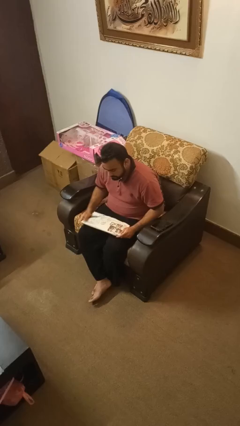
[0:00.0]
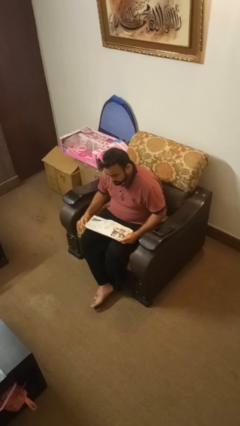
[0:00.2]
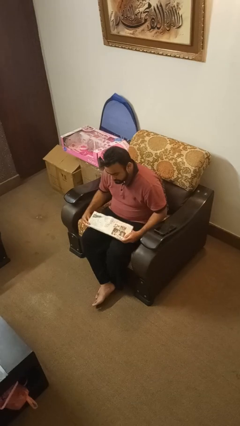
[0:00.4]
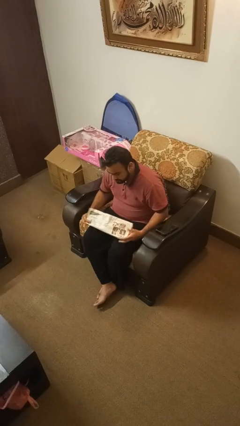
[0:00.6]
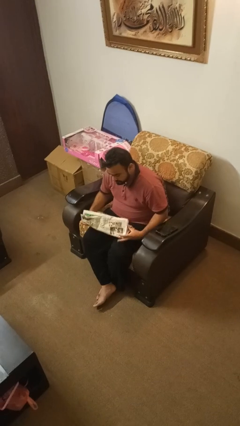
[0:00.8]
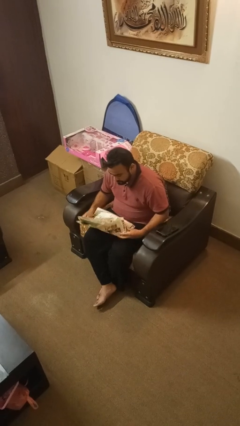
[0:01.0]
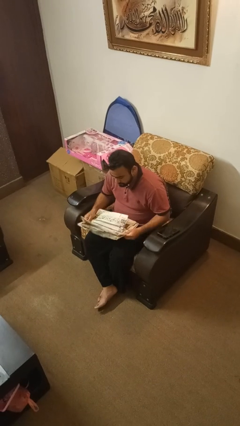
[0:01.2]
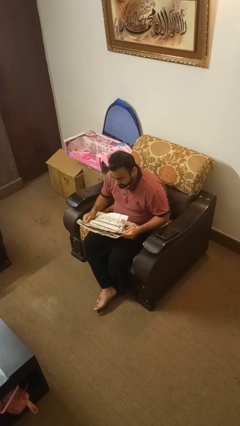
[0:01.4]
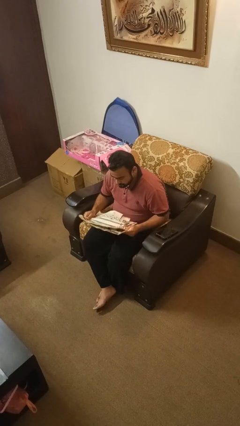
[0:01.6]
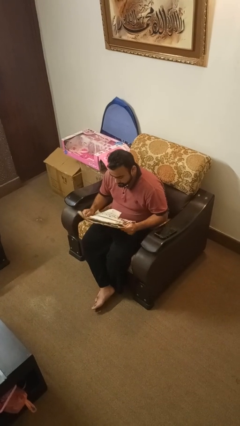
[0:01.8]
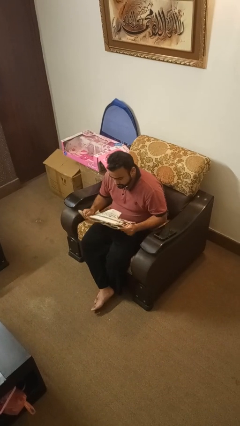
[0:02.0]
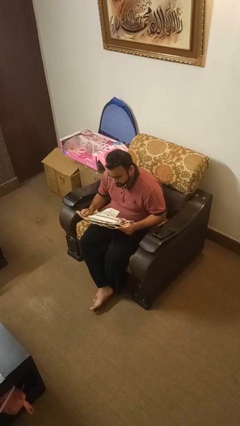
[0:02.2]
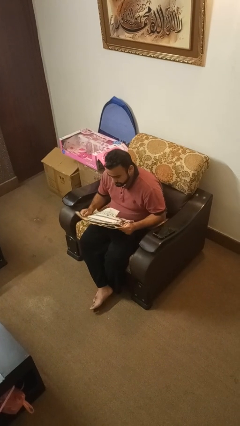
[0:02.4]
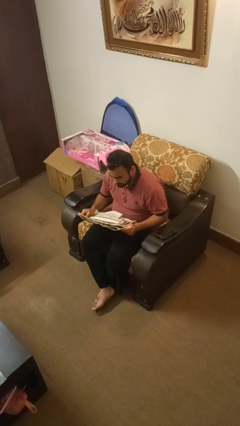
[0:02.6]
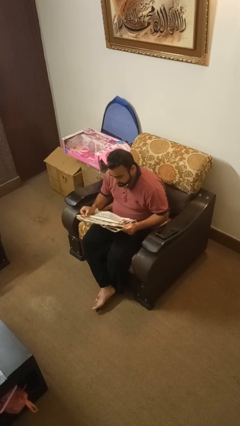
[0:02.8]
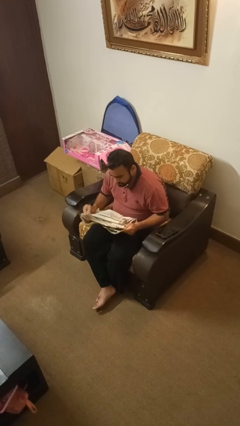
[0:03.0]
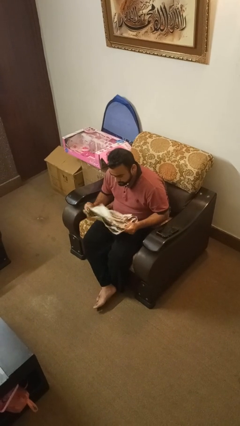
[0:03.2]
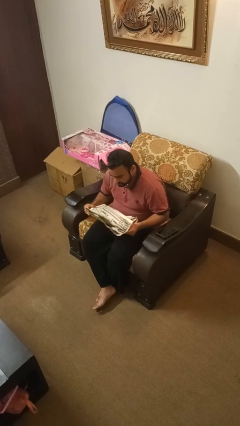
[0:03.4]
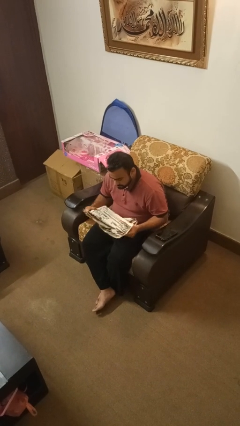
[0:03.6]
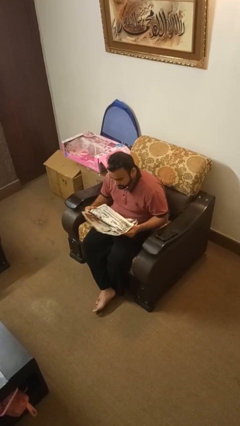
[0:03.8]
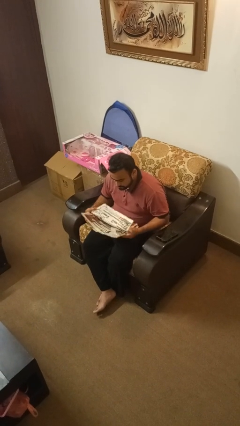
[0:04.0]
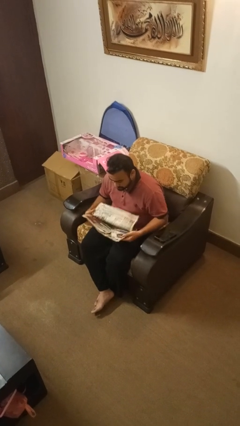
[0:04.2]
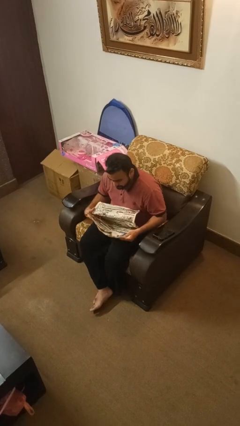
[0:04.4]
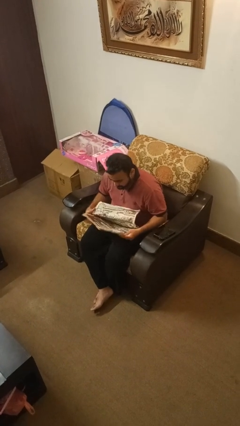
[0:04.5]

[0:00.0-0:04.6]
person reads newspaper

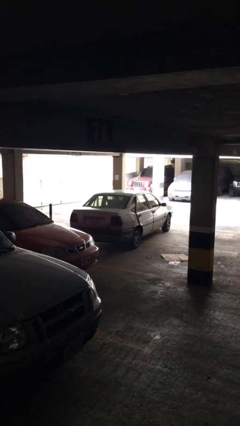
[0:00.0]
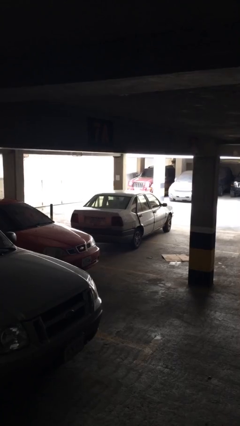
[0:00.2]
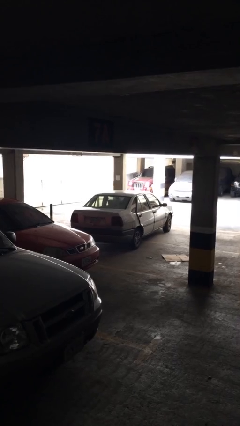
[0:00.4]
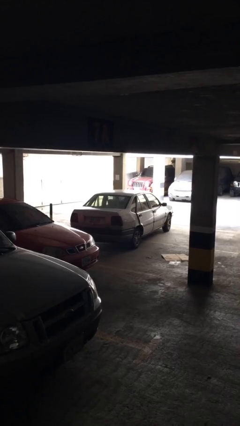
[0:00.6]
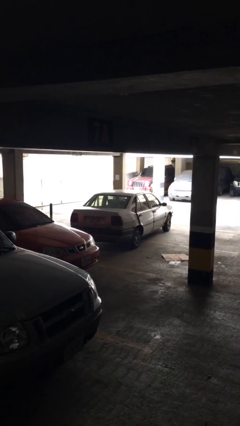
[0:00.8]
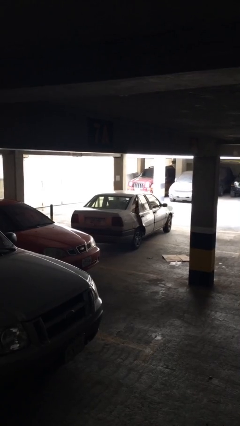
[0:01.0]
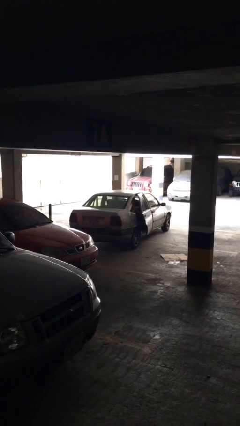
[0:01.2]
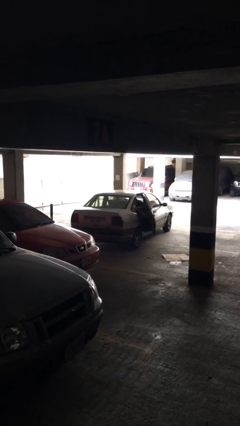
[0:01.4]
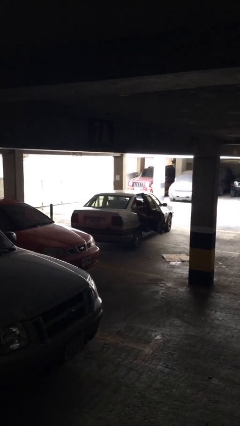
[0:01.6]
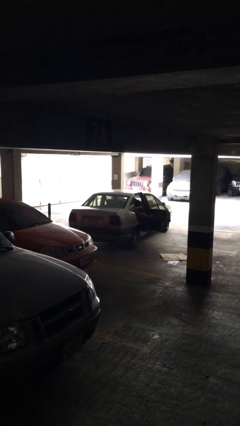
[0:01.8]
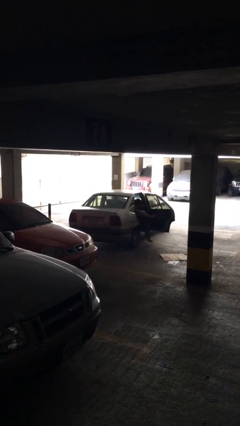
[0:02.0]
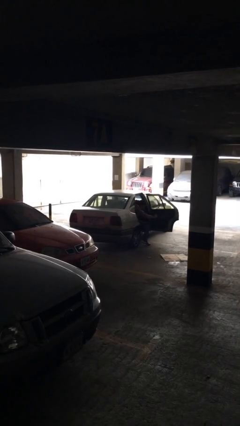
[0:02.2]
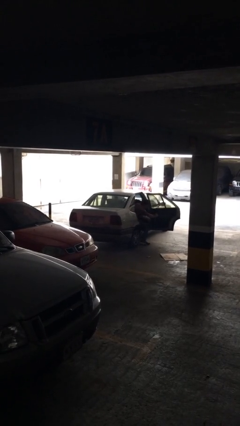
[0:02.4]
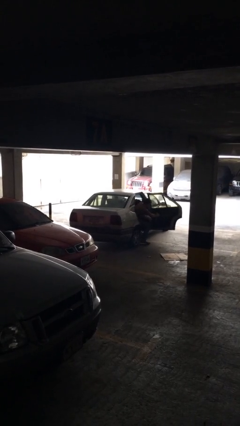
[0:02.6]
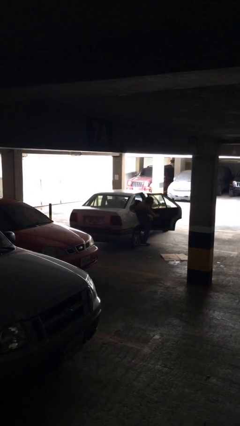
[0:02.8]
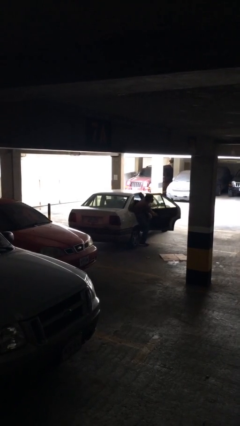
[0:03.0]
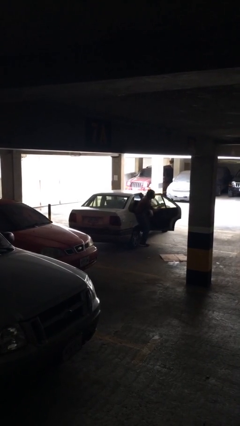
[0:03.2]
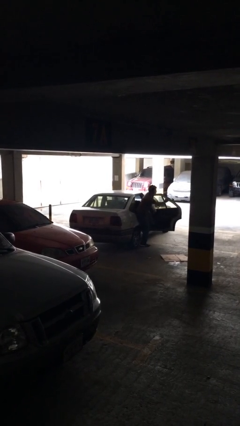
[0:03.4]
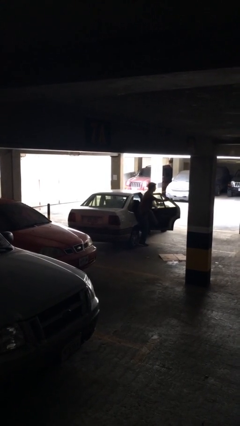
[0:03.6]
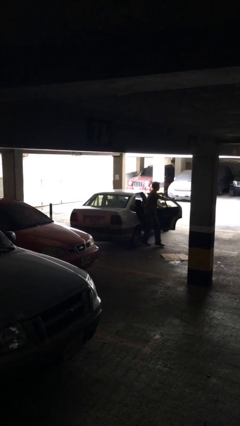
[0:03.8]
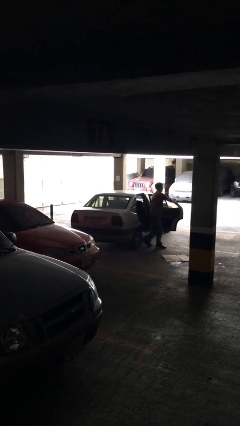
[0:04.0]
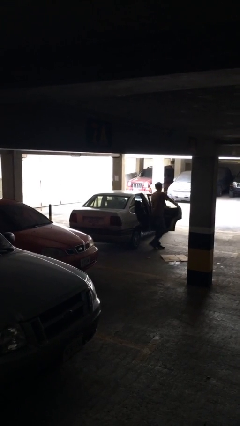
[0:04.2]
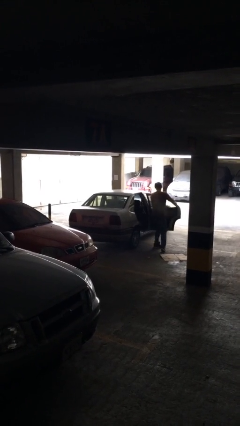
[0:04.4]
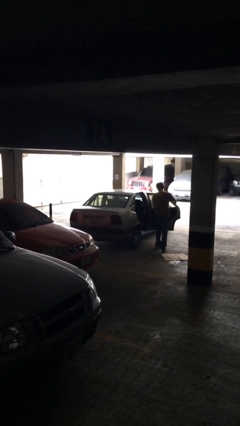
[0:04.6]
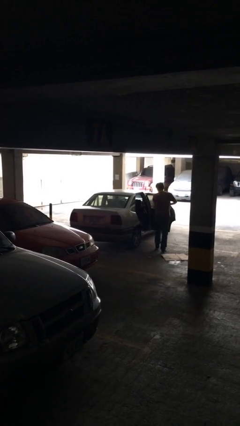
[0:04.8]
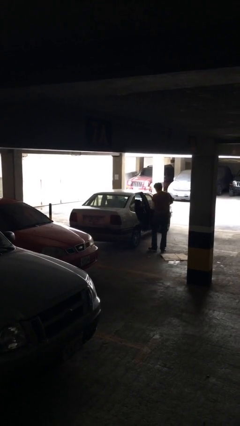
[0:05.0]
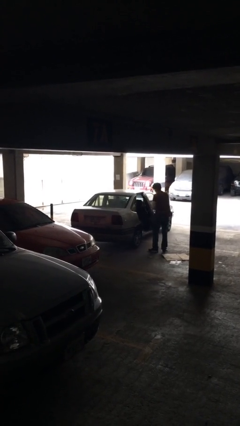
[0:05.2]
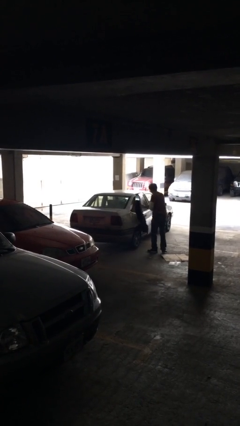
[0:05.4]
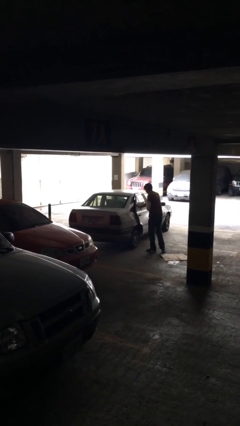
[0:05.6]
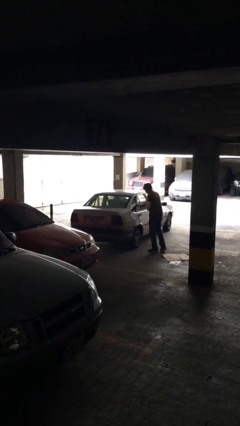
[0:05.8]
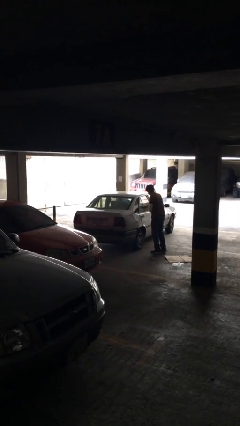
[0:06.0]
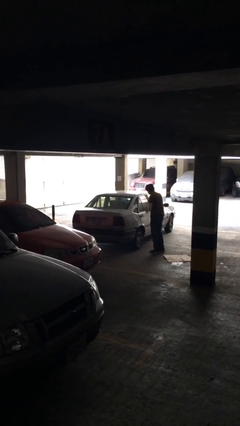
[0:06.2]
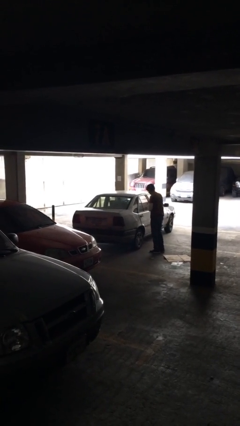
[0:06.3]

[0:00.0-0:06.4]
car drops off person

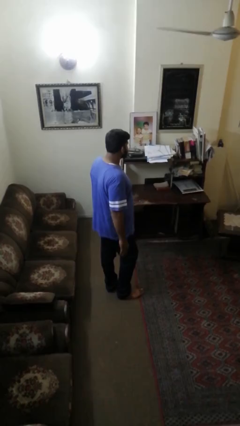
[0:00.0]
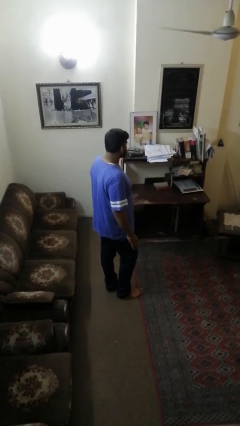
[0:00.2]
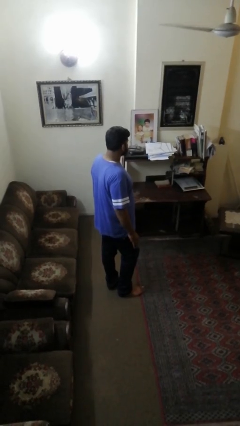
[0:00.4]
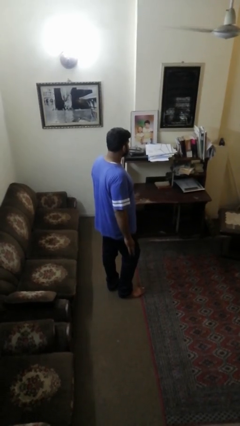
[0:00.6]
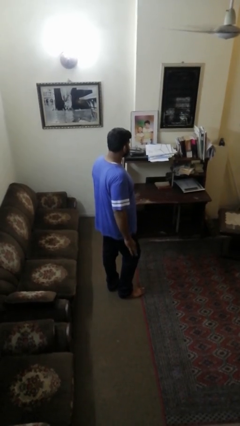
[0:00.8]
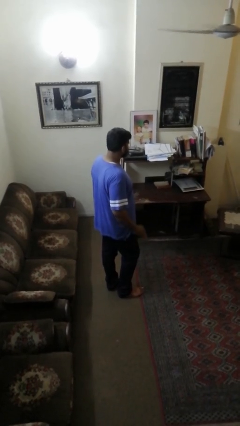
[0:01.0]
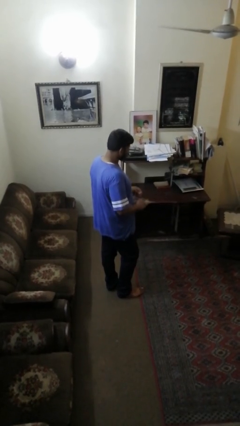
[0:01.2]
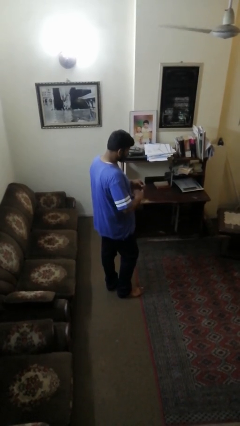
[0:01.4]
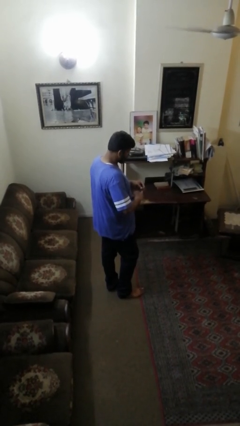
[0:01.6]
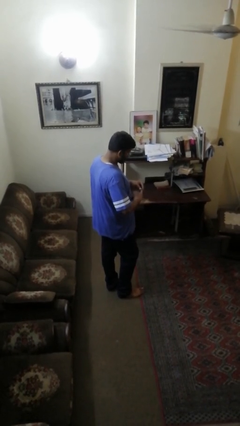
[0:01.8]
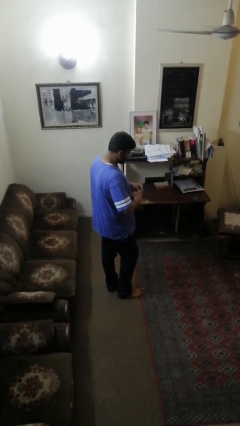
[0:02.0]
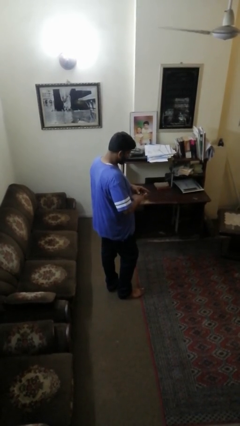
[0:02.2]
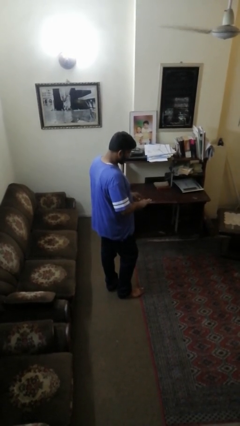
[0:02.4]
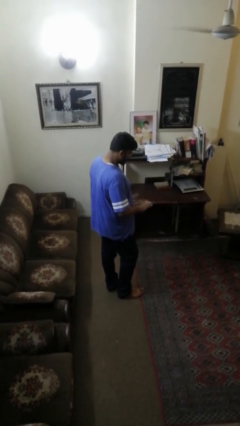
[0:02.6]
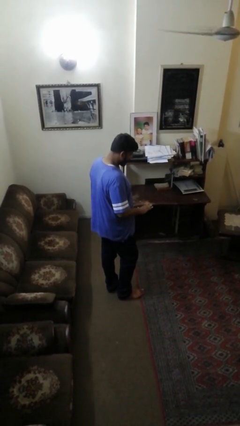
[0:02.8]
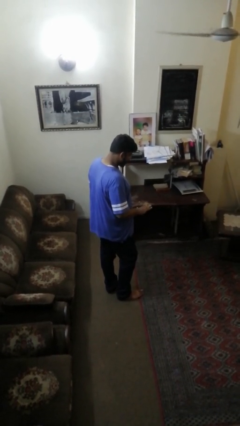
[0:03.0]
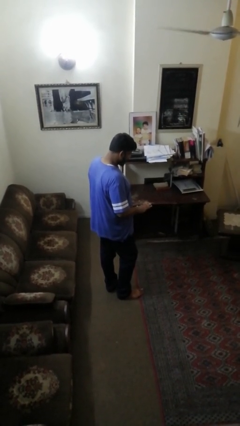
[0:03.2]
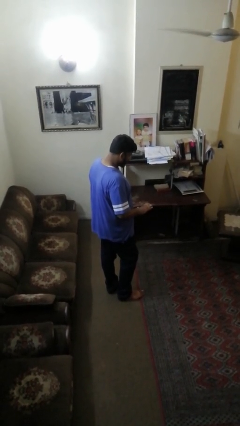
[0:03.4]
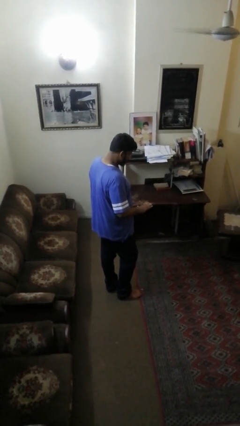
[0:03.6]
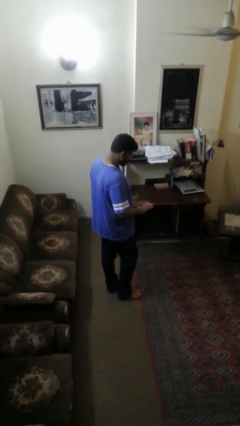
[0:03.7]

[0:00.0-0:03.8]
person puts on ring

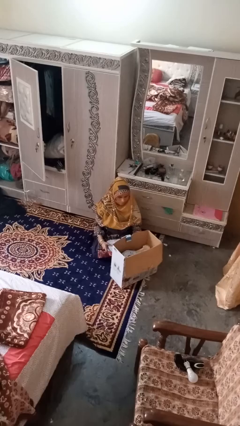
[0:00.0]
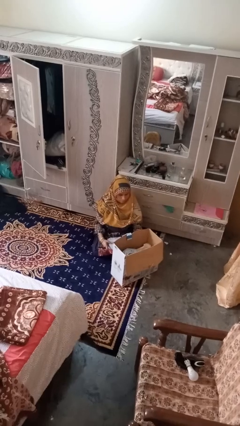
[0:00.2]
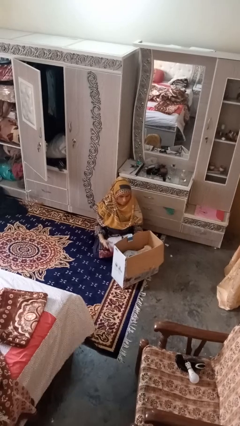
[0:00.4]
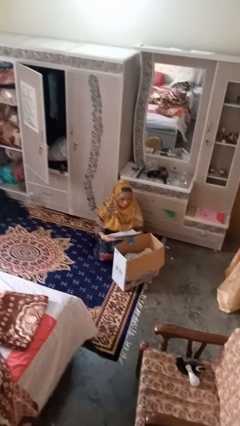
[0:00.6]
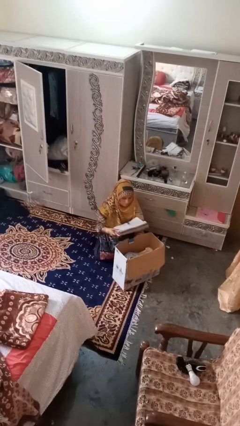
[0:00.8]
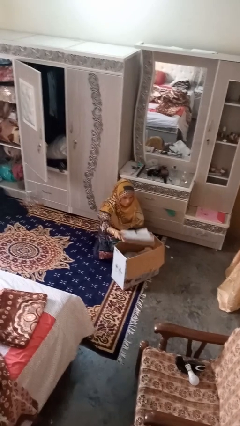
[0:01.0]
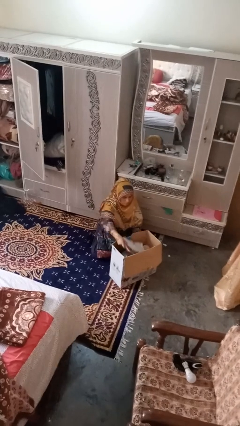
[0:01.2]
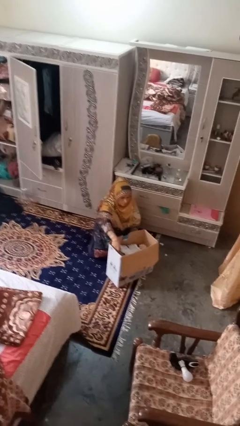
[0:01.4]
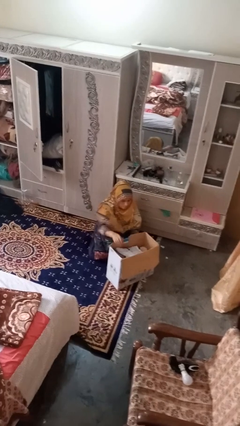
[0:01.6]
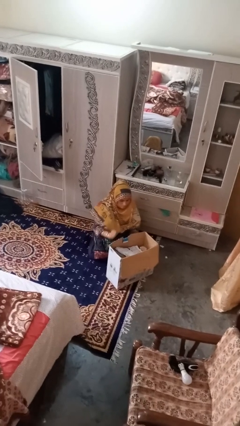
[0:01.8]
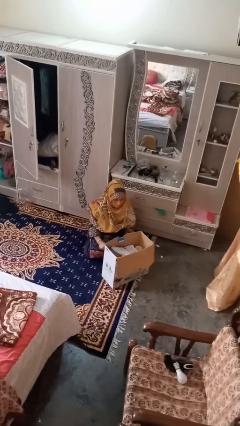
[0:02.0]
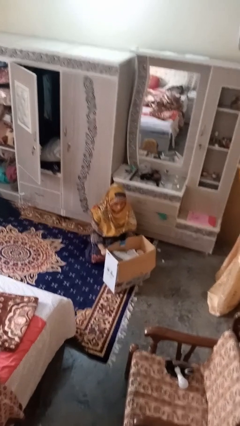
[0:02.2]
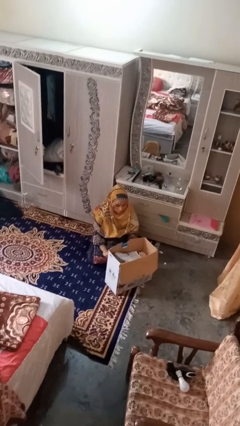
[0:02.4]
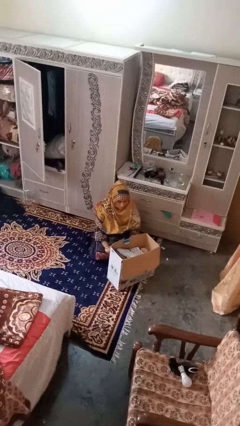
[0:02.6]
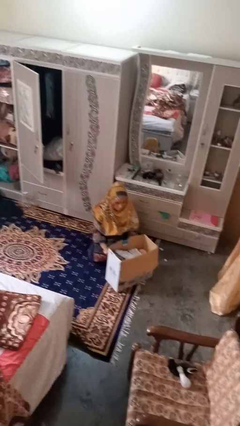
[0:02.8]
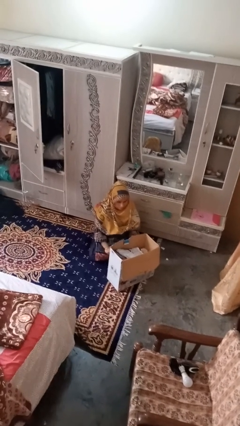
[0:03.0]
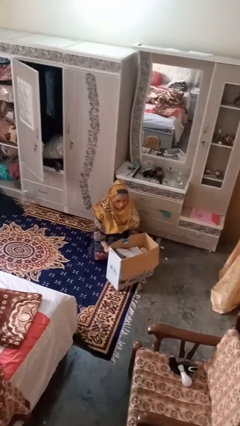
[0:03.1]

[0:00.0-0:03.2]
person puts object into box
